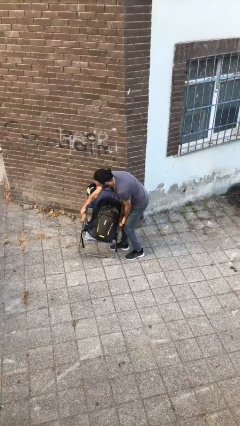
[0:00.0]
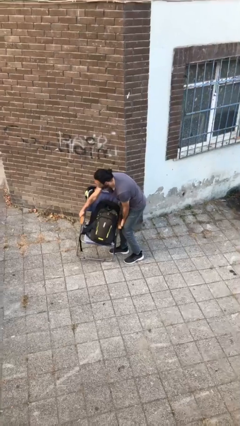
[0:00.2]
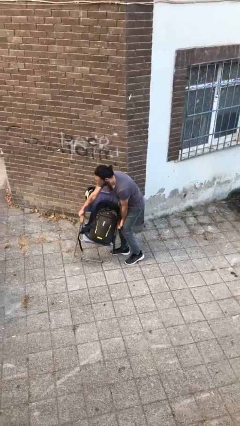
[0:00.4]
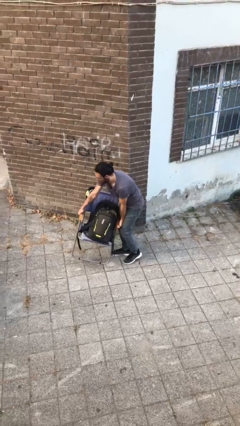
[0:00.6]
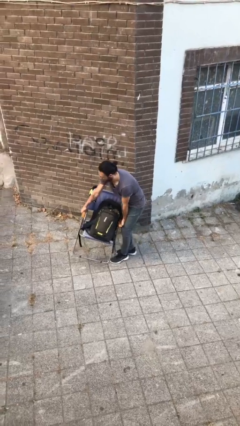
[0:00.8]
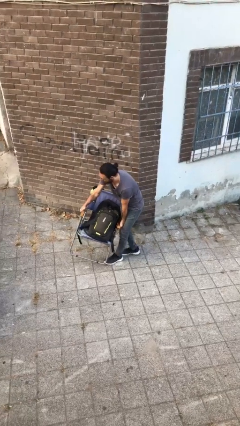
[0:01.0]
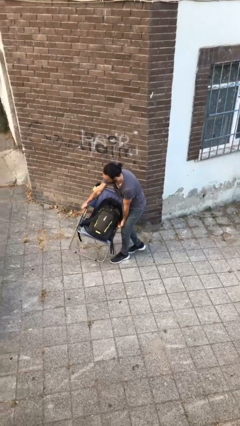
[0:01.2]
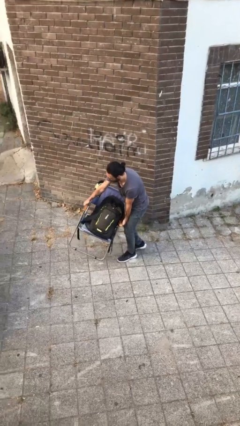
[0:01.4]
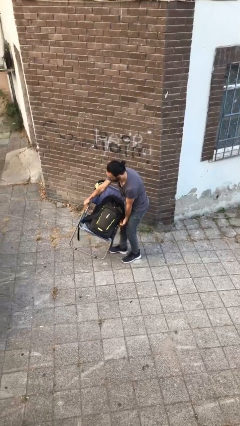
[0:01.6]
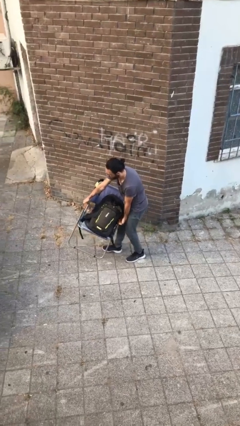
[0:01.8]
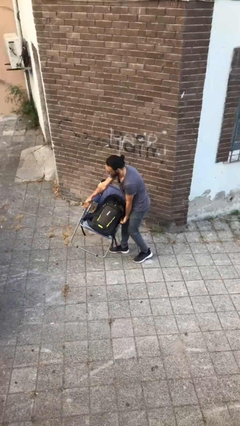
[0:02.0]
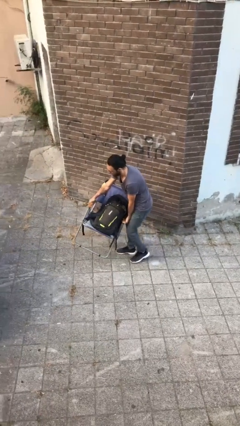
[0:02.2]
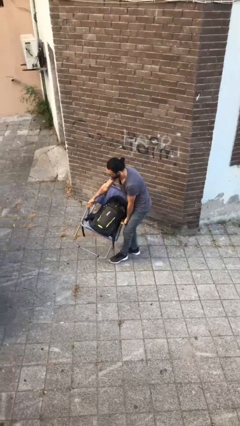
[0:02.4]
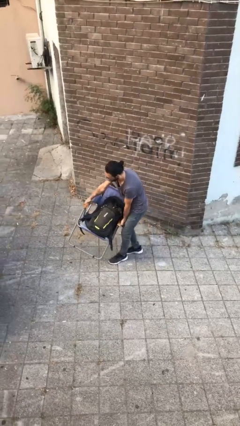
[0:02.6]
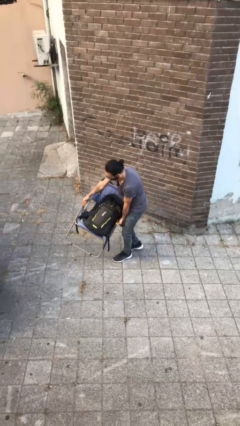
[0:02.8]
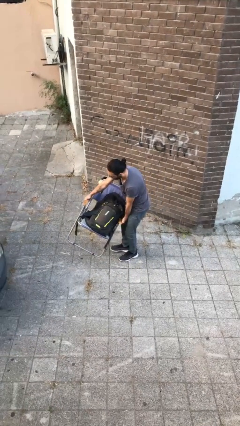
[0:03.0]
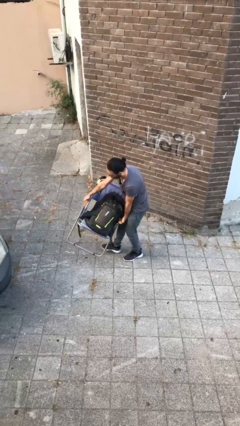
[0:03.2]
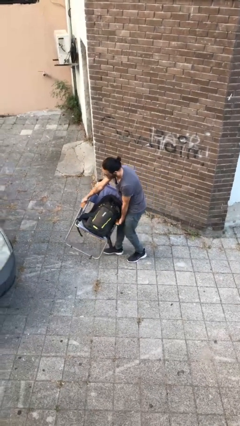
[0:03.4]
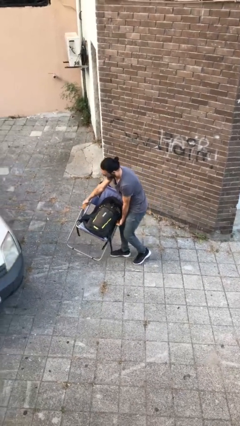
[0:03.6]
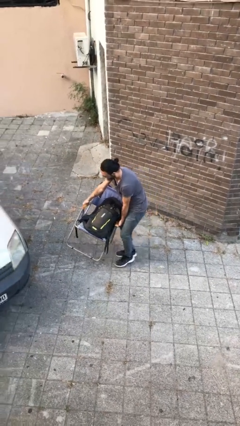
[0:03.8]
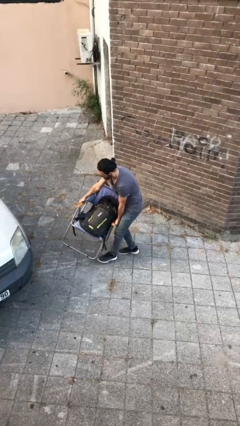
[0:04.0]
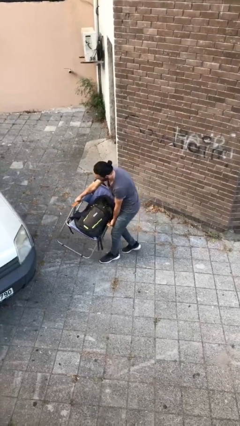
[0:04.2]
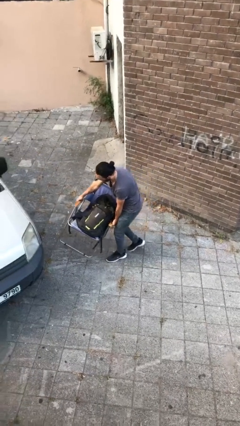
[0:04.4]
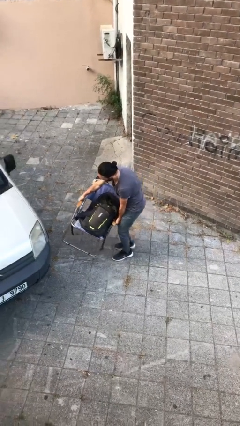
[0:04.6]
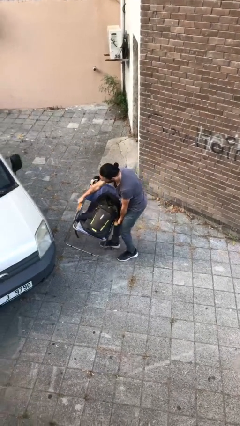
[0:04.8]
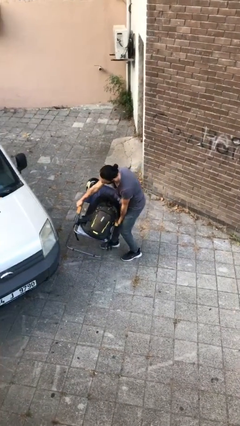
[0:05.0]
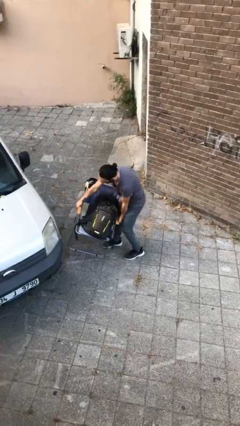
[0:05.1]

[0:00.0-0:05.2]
person carries heavy object

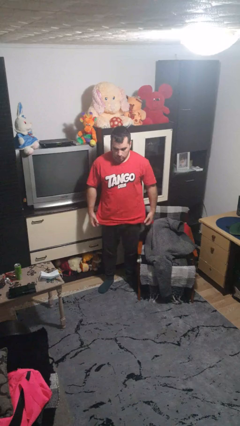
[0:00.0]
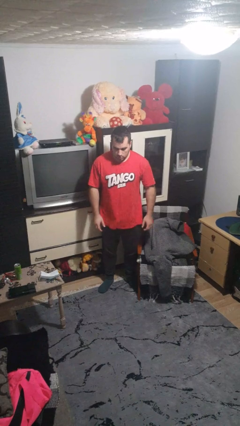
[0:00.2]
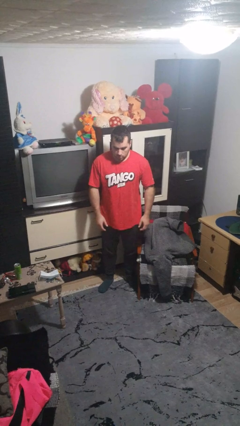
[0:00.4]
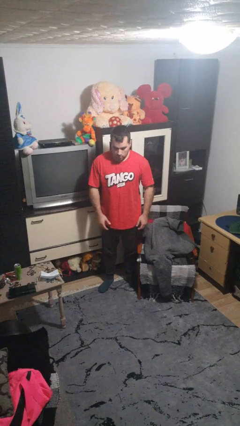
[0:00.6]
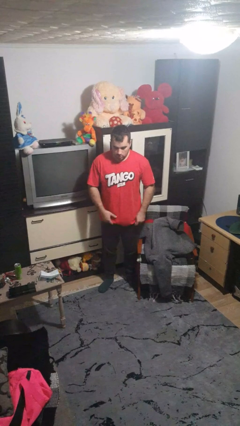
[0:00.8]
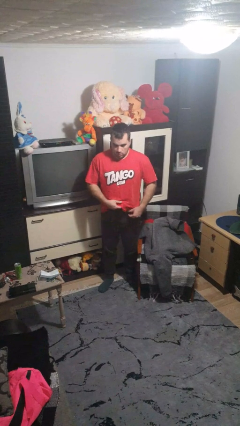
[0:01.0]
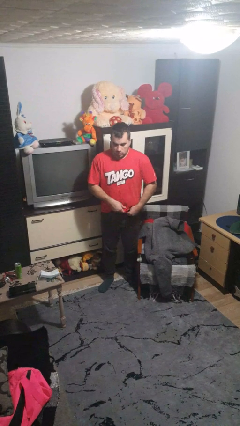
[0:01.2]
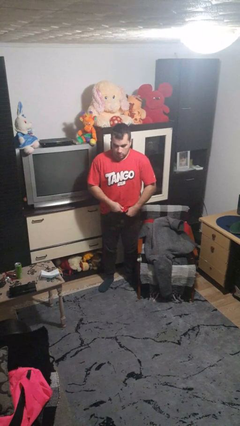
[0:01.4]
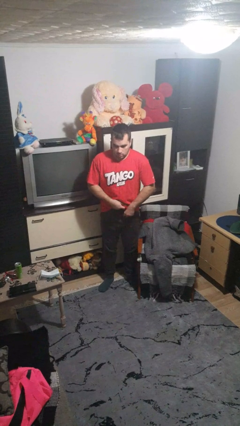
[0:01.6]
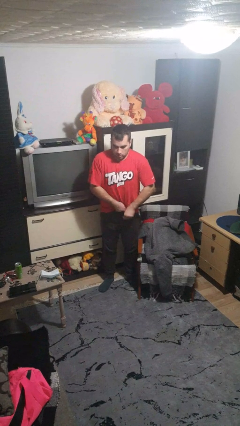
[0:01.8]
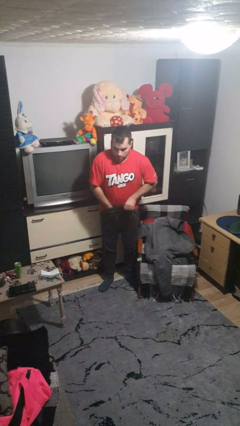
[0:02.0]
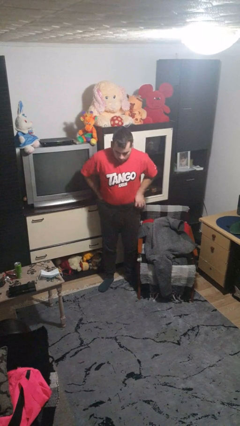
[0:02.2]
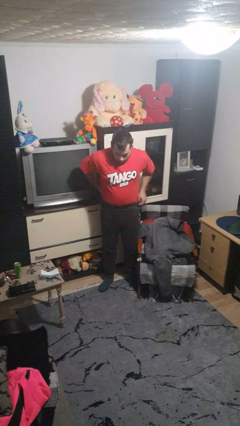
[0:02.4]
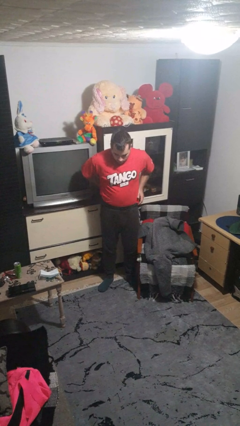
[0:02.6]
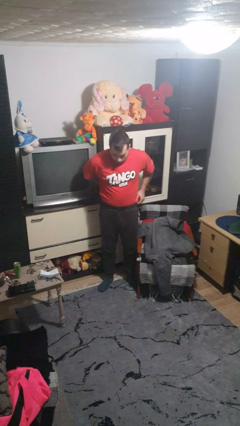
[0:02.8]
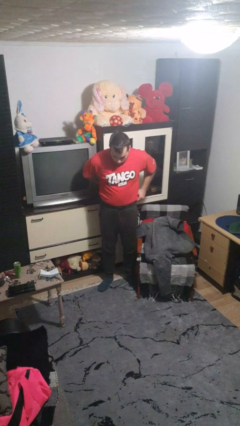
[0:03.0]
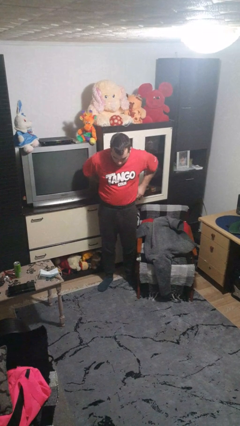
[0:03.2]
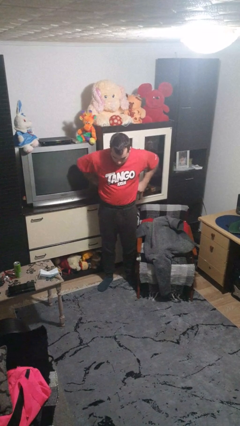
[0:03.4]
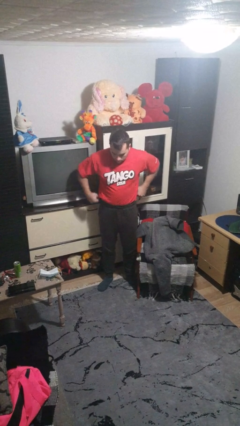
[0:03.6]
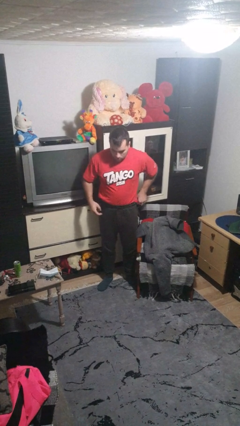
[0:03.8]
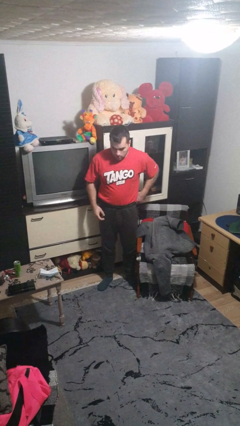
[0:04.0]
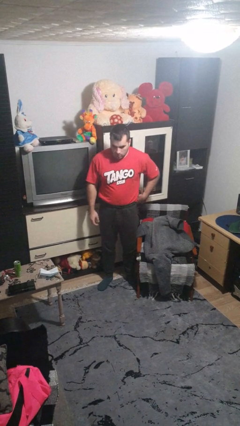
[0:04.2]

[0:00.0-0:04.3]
person tucks in shirt

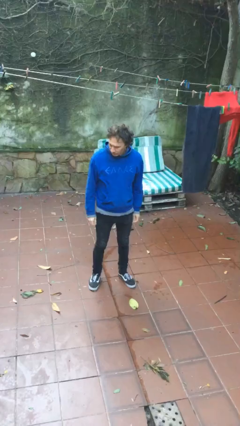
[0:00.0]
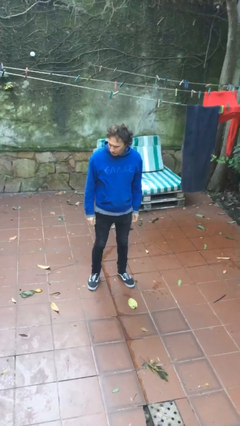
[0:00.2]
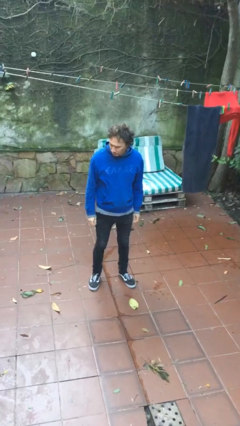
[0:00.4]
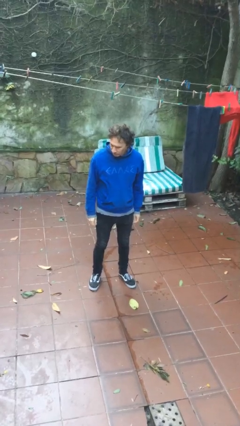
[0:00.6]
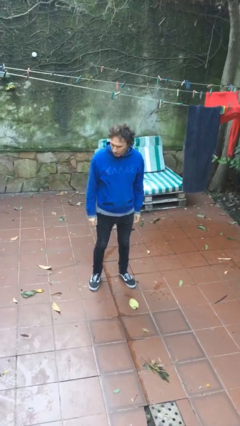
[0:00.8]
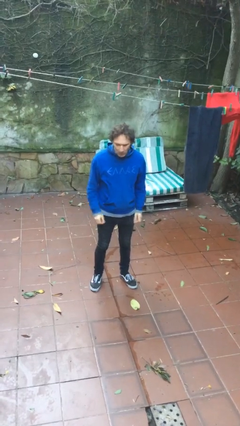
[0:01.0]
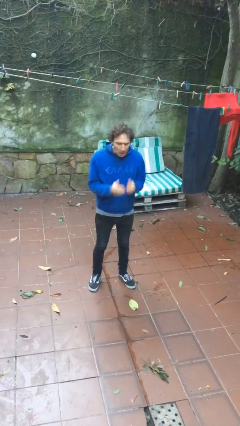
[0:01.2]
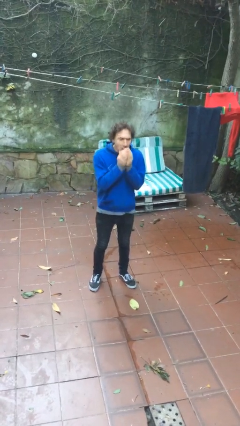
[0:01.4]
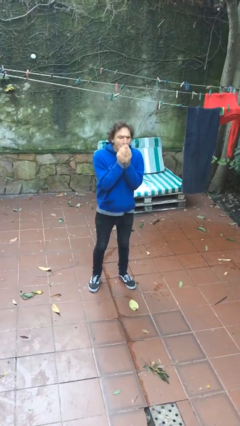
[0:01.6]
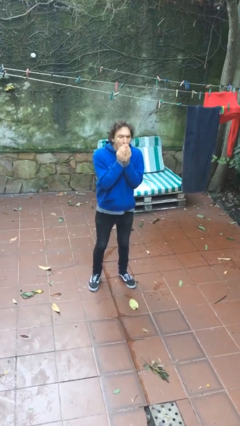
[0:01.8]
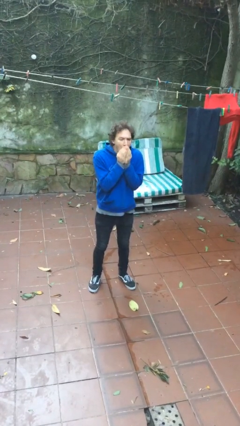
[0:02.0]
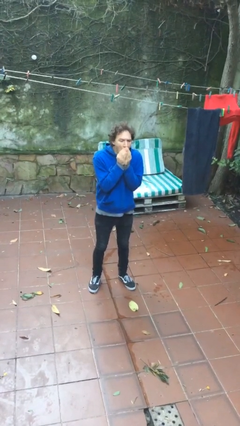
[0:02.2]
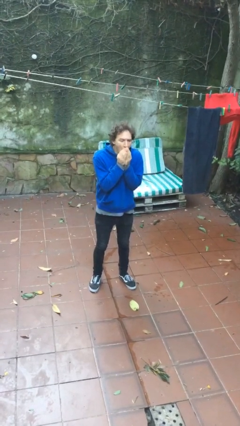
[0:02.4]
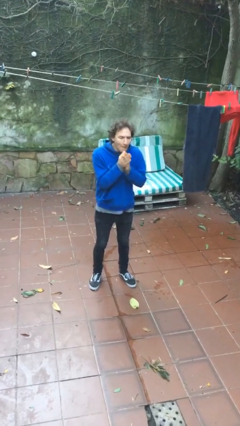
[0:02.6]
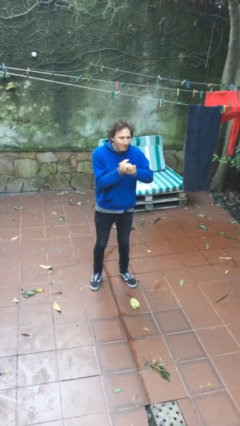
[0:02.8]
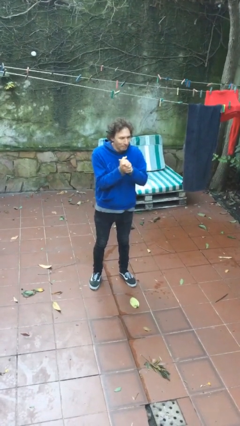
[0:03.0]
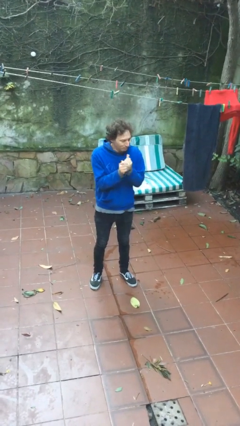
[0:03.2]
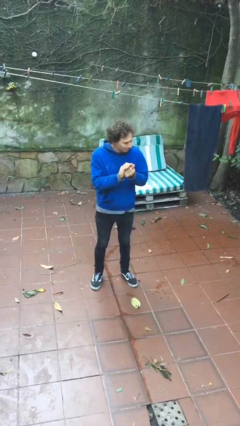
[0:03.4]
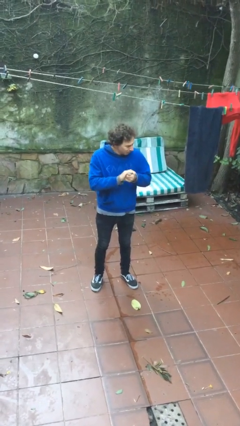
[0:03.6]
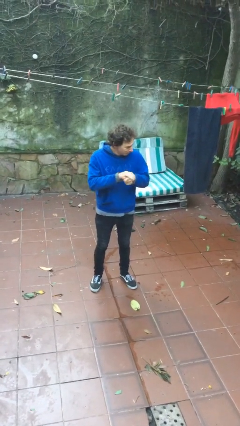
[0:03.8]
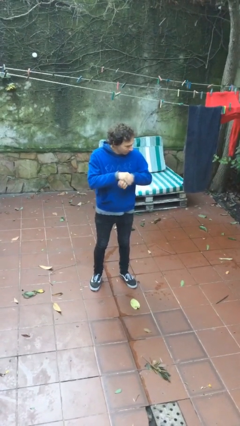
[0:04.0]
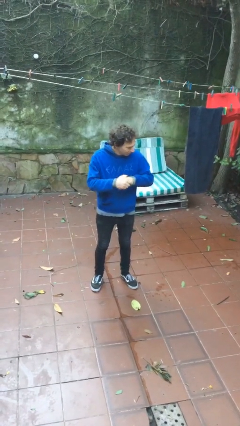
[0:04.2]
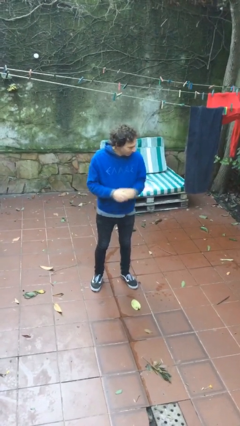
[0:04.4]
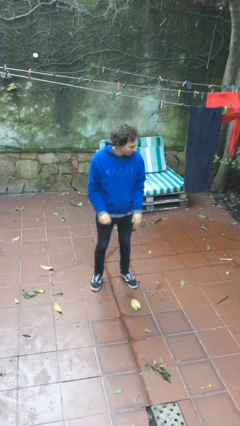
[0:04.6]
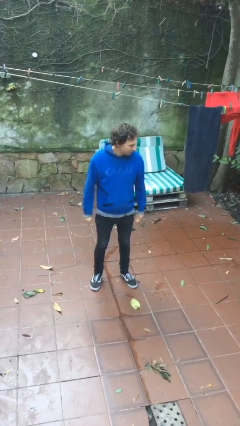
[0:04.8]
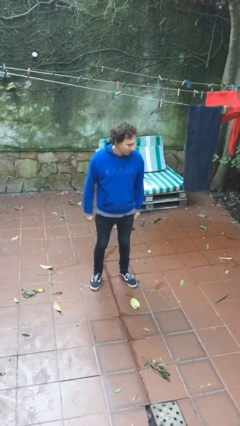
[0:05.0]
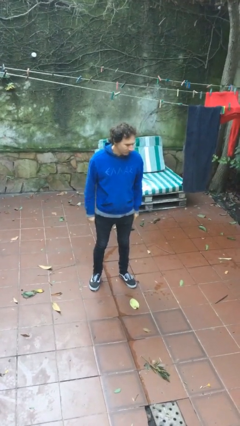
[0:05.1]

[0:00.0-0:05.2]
person blows into hands

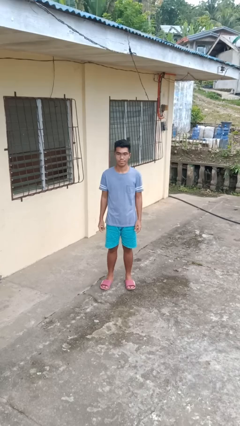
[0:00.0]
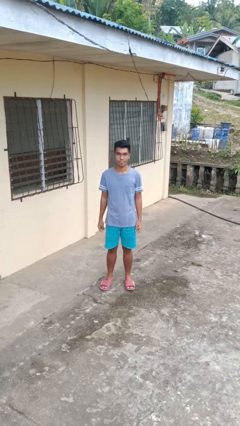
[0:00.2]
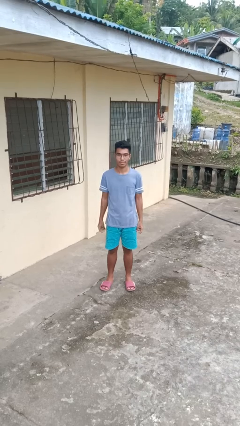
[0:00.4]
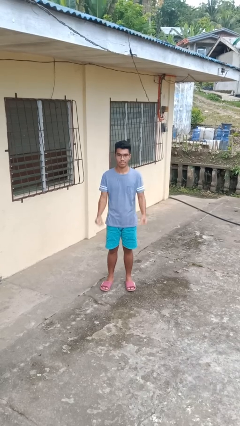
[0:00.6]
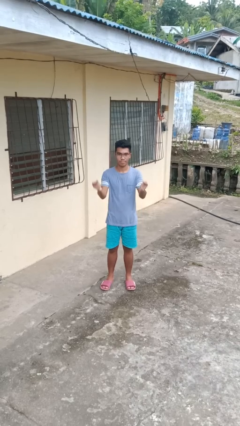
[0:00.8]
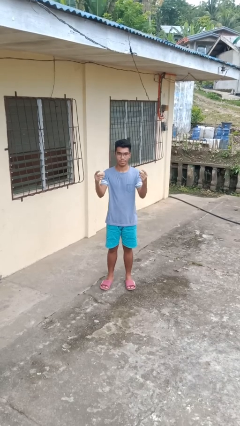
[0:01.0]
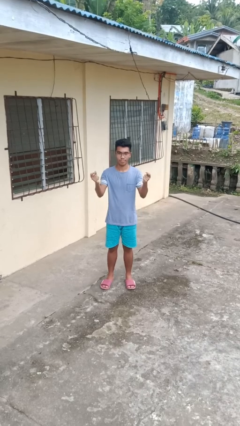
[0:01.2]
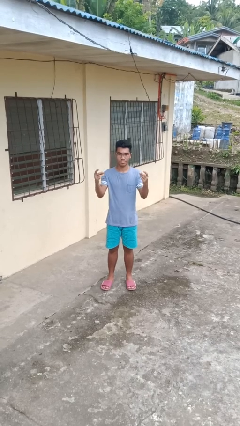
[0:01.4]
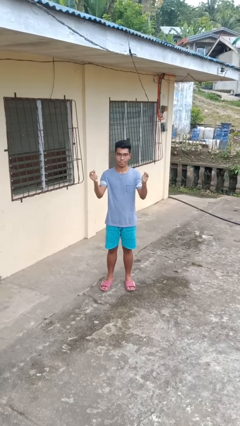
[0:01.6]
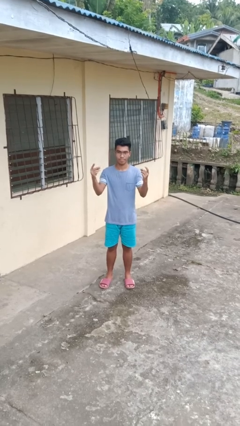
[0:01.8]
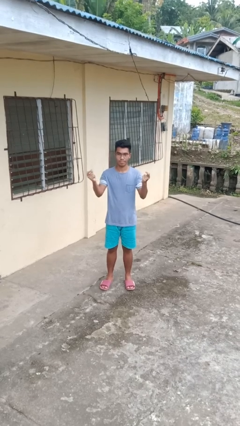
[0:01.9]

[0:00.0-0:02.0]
person snaps fingers

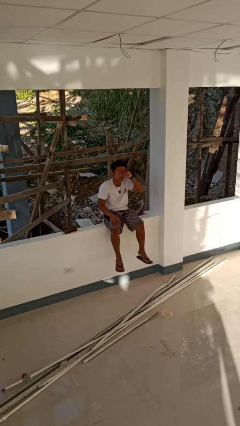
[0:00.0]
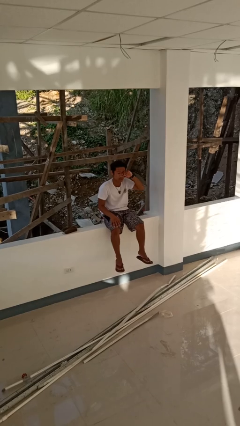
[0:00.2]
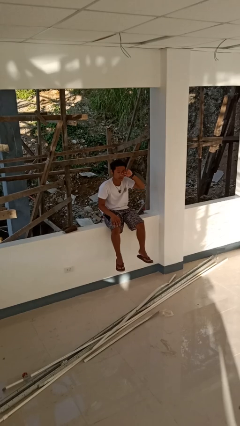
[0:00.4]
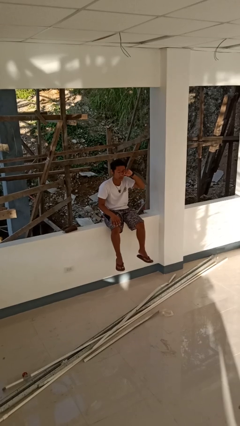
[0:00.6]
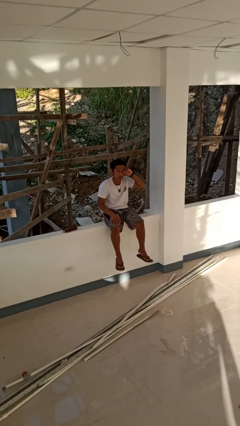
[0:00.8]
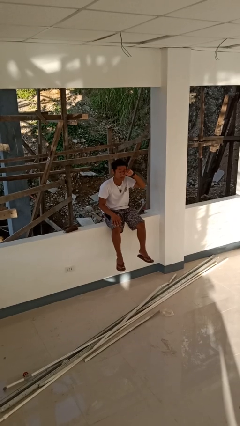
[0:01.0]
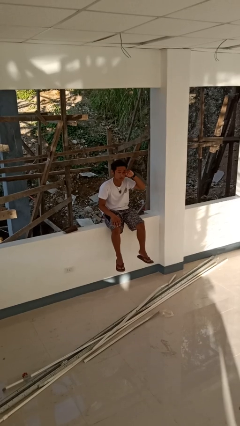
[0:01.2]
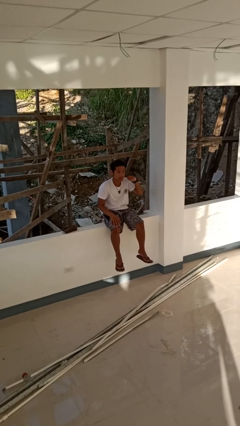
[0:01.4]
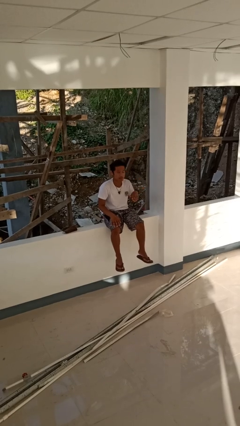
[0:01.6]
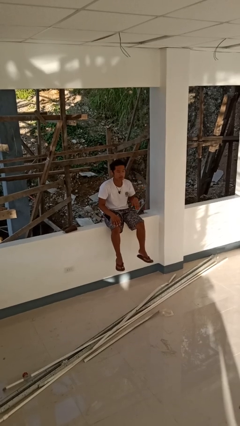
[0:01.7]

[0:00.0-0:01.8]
person rubs eyes
